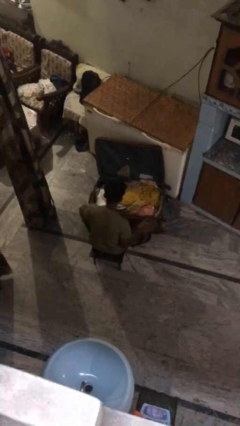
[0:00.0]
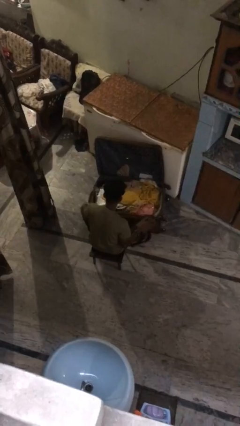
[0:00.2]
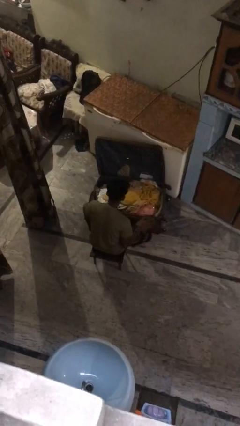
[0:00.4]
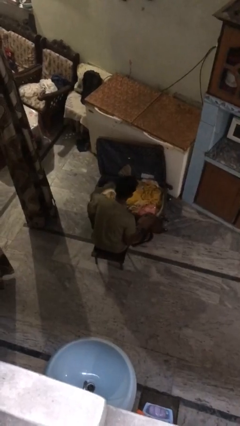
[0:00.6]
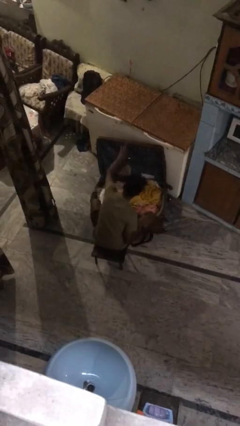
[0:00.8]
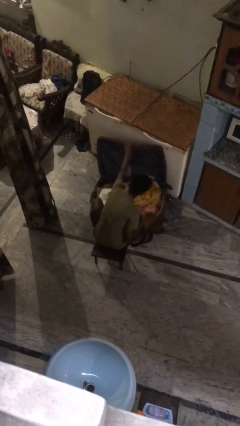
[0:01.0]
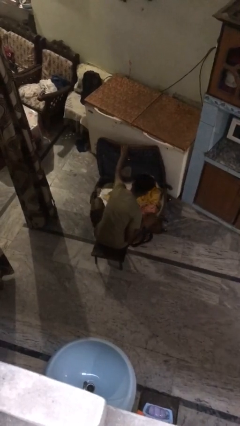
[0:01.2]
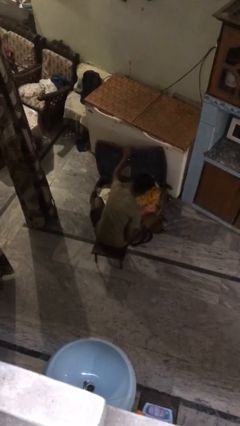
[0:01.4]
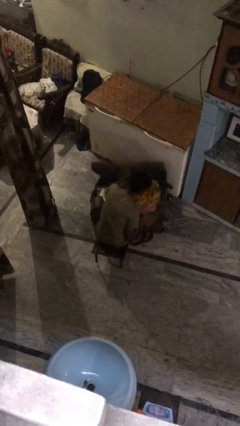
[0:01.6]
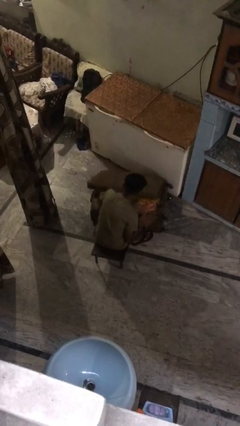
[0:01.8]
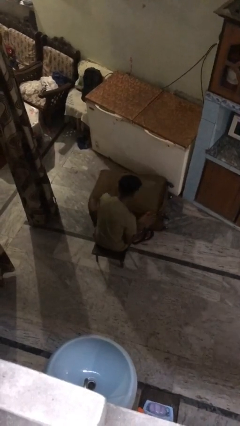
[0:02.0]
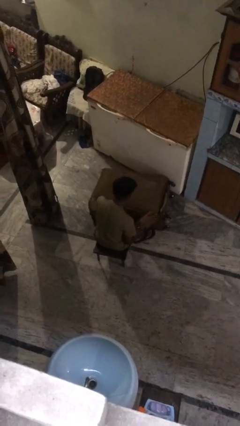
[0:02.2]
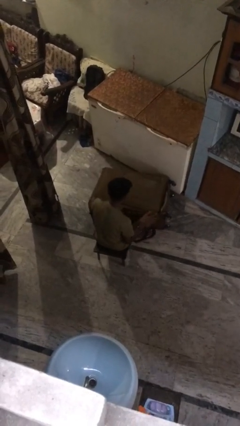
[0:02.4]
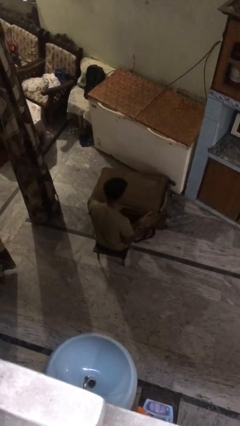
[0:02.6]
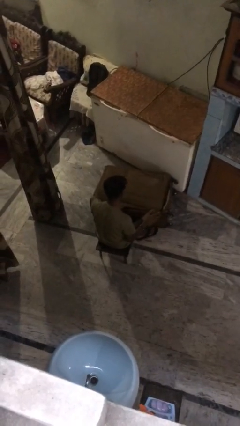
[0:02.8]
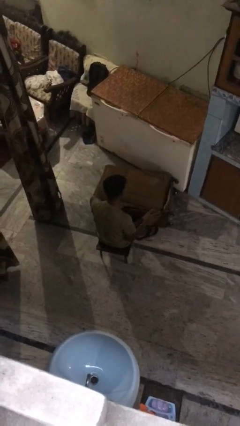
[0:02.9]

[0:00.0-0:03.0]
person closes suitcase

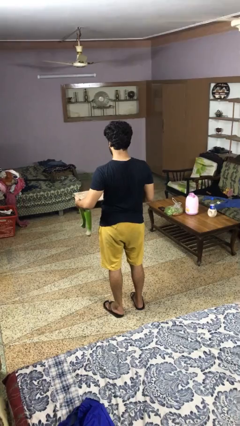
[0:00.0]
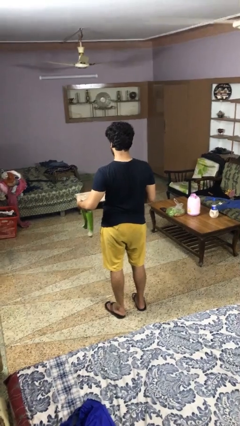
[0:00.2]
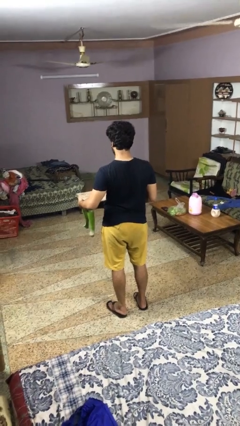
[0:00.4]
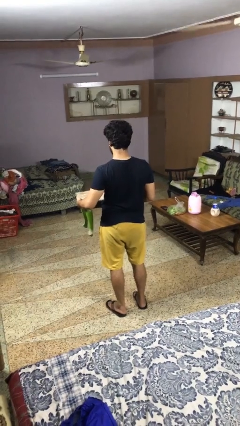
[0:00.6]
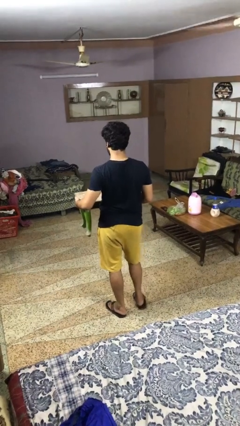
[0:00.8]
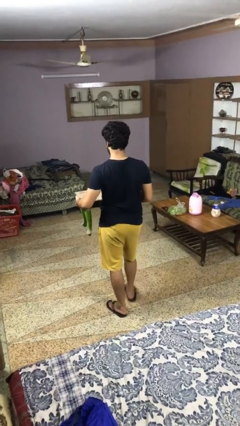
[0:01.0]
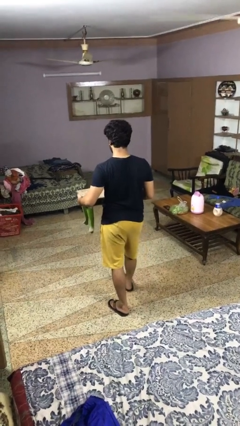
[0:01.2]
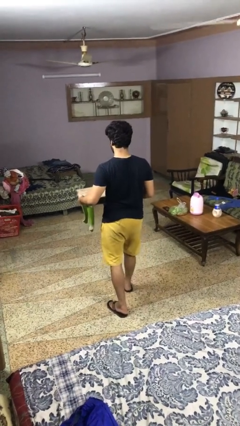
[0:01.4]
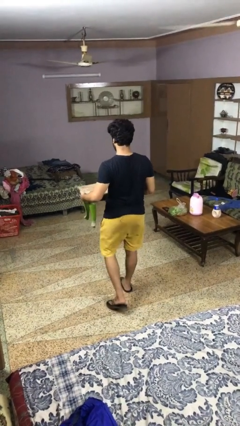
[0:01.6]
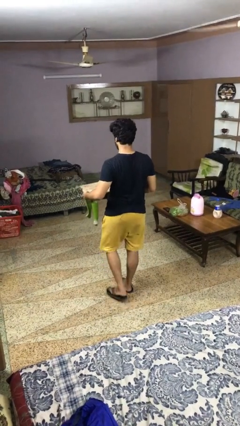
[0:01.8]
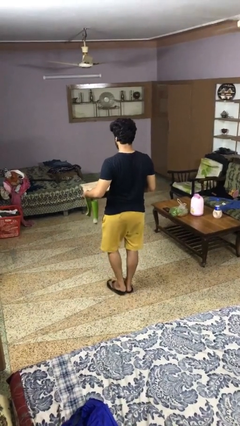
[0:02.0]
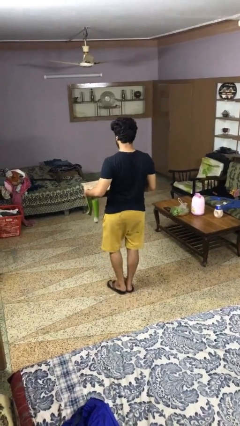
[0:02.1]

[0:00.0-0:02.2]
person carries furniture

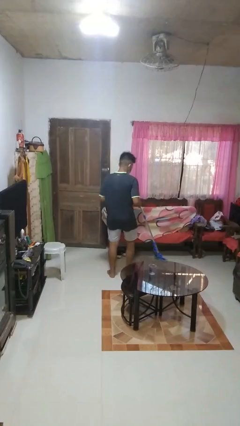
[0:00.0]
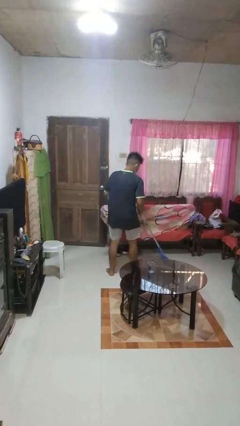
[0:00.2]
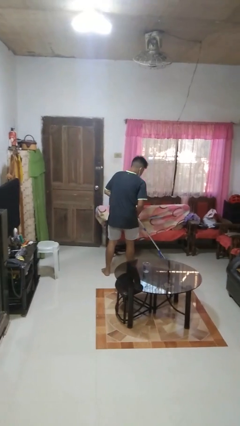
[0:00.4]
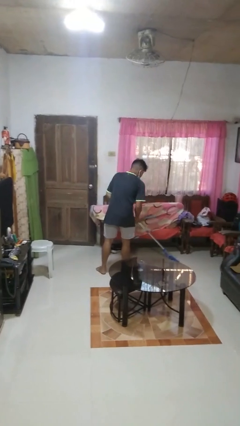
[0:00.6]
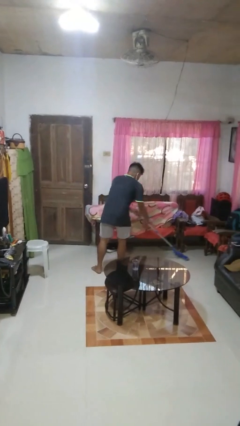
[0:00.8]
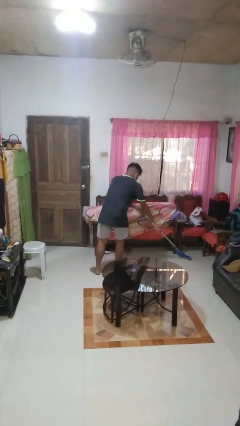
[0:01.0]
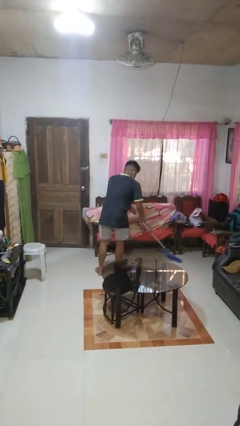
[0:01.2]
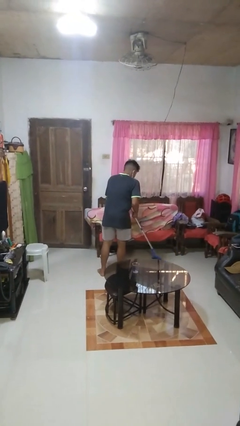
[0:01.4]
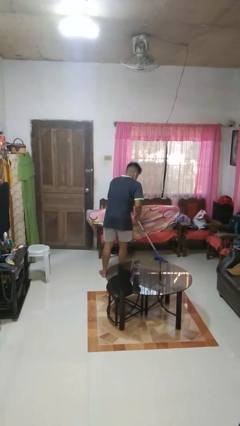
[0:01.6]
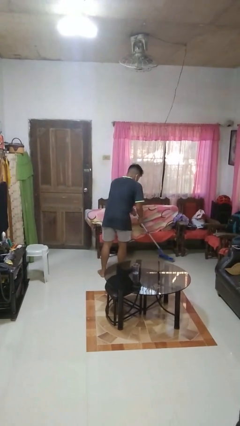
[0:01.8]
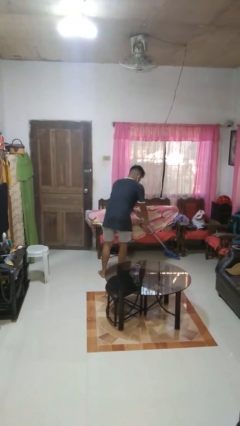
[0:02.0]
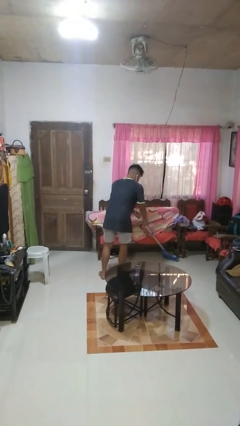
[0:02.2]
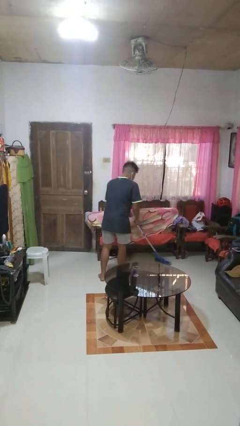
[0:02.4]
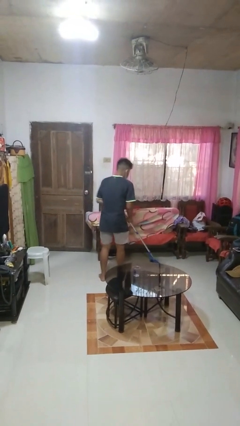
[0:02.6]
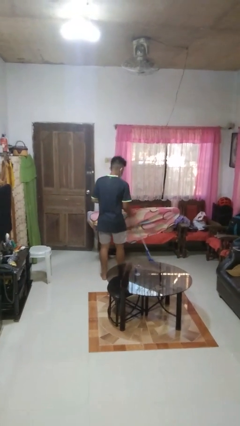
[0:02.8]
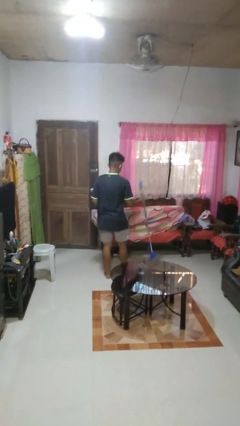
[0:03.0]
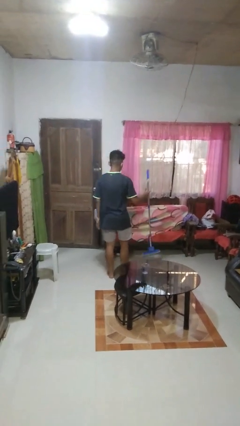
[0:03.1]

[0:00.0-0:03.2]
person mops

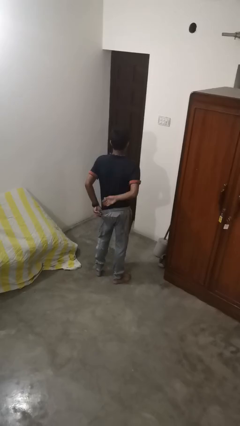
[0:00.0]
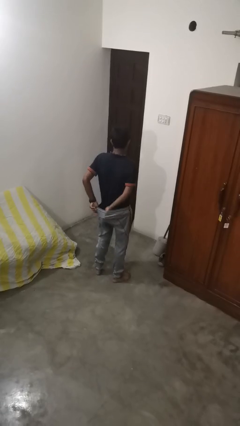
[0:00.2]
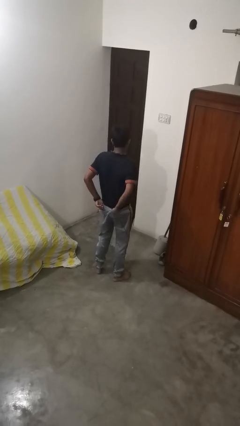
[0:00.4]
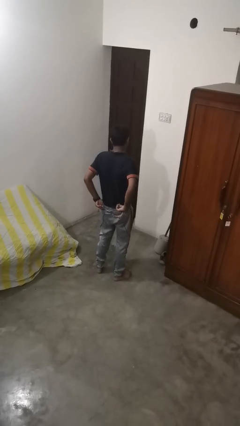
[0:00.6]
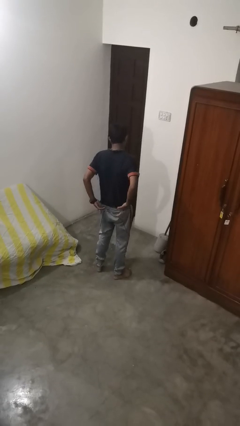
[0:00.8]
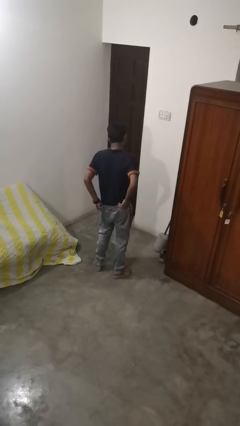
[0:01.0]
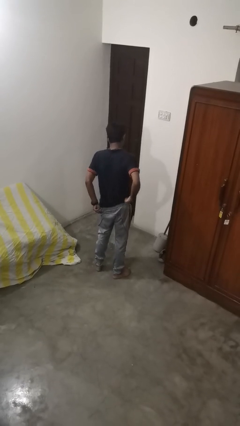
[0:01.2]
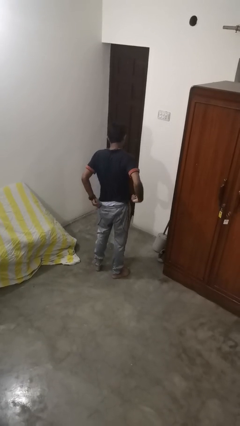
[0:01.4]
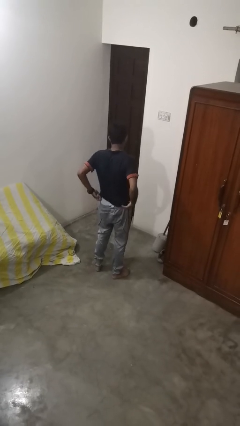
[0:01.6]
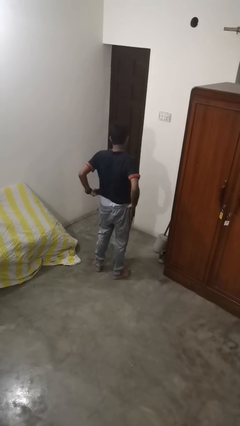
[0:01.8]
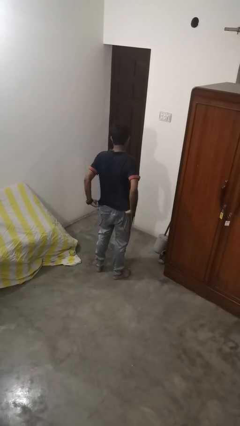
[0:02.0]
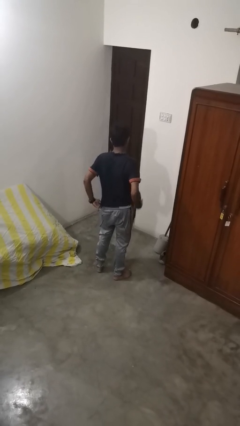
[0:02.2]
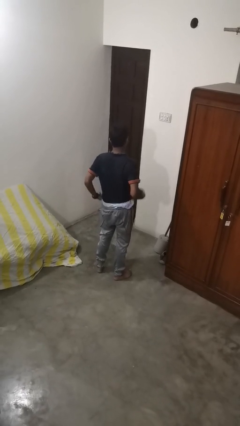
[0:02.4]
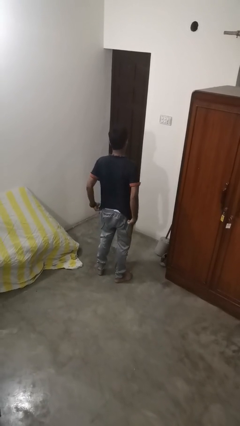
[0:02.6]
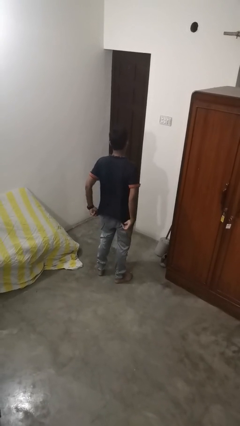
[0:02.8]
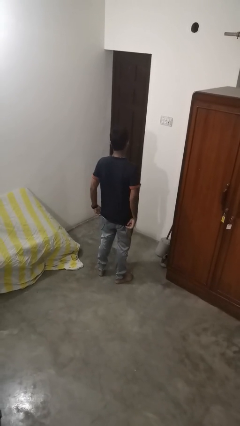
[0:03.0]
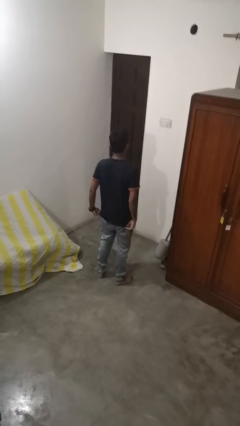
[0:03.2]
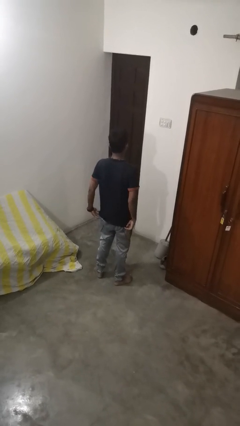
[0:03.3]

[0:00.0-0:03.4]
person untucks shirt

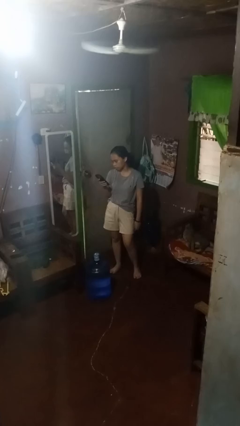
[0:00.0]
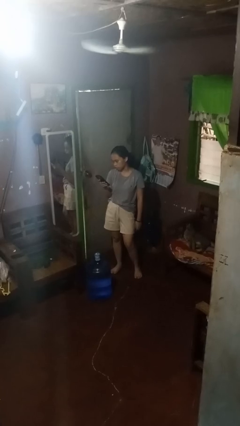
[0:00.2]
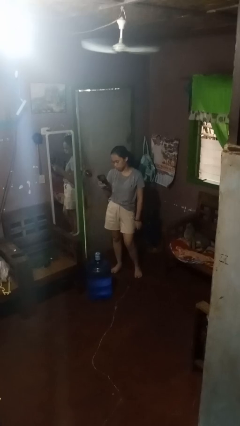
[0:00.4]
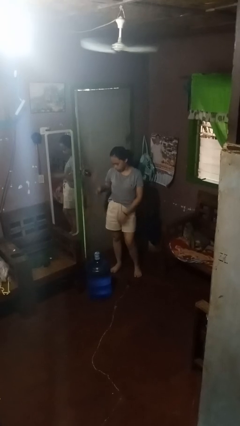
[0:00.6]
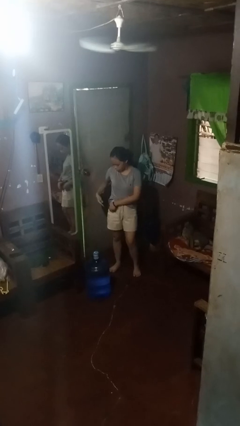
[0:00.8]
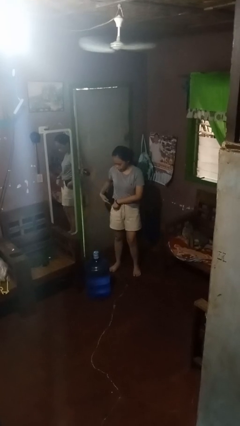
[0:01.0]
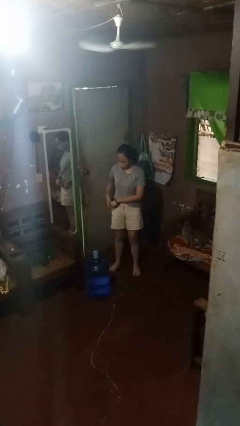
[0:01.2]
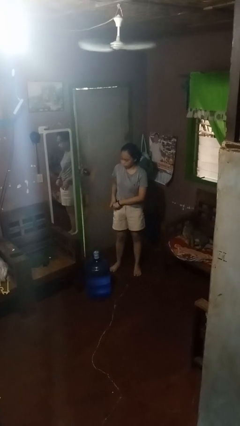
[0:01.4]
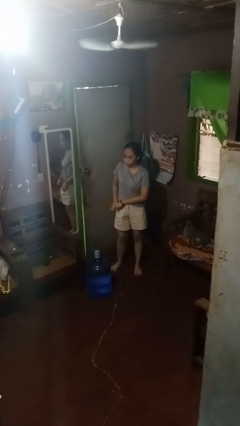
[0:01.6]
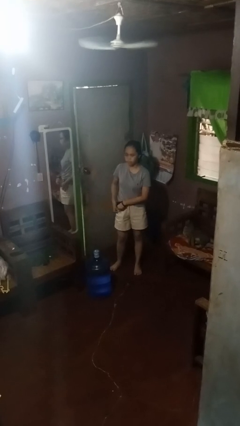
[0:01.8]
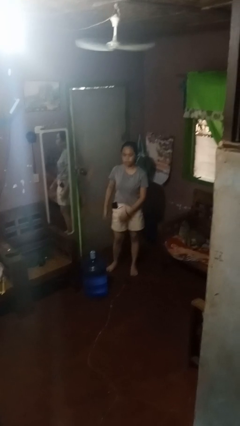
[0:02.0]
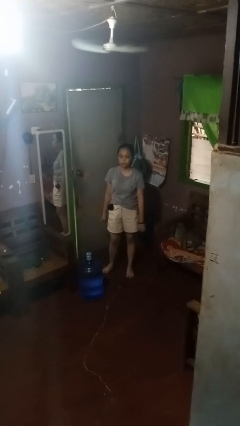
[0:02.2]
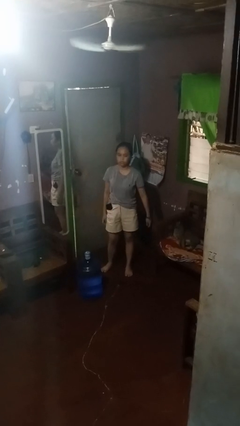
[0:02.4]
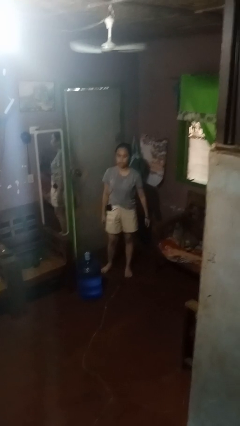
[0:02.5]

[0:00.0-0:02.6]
person puts phone into pocket

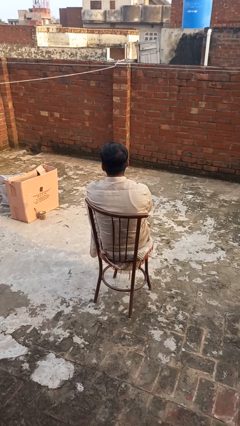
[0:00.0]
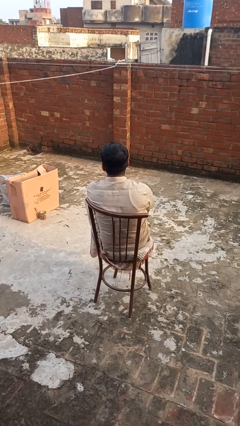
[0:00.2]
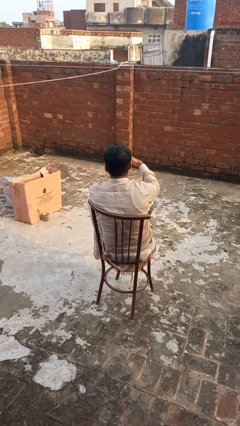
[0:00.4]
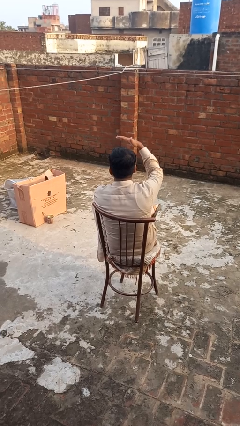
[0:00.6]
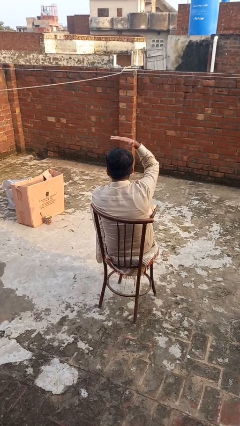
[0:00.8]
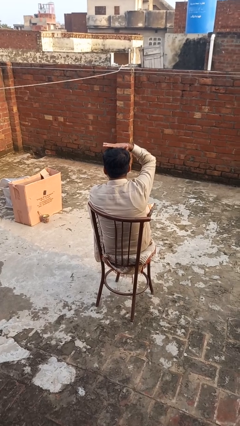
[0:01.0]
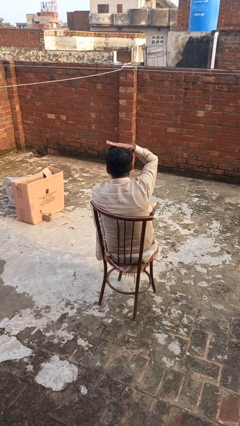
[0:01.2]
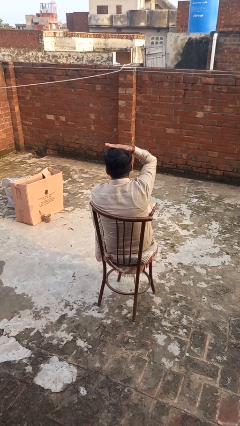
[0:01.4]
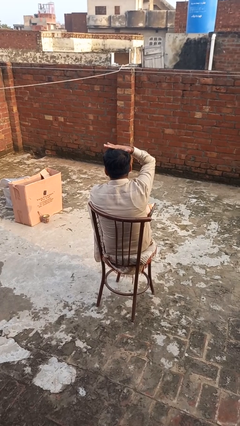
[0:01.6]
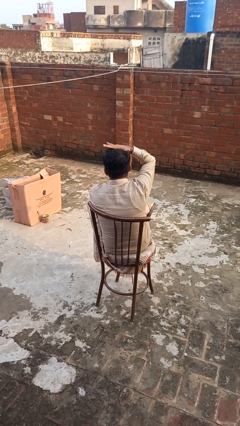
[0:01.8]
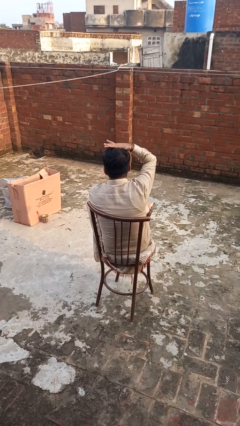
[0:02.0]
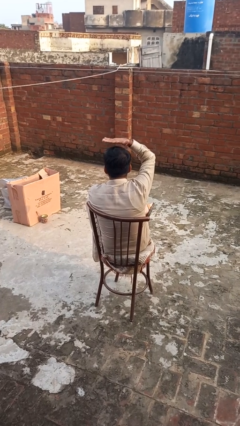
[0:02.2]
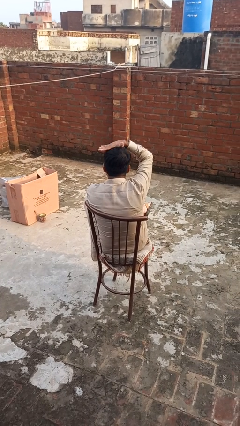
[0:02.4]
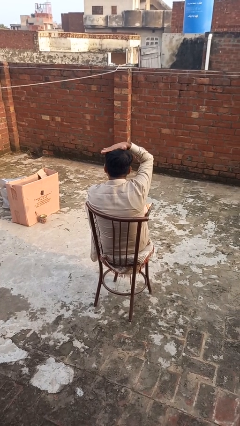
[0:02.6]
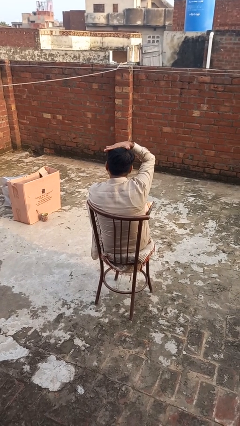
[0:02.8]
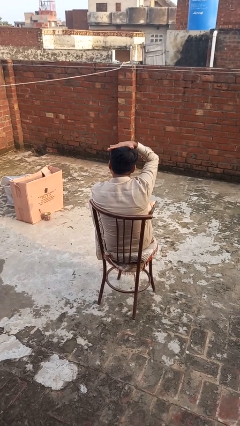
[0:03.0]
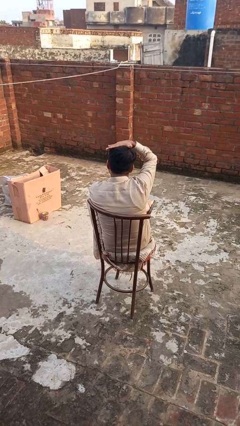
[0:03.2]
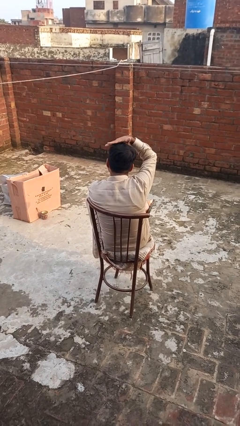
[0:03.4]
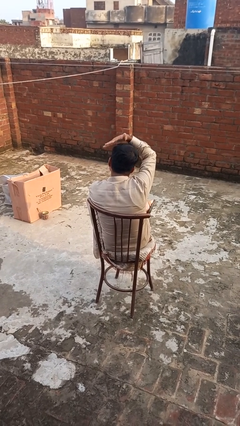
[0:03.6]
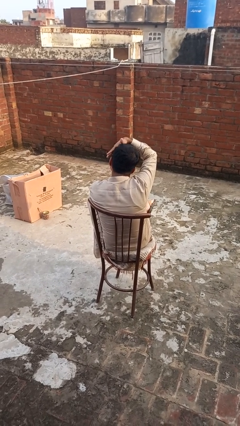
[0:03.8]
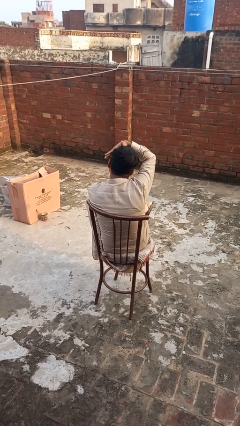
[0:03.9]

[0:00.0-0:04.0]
person pats head
